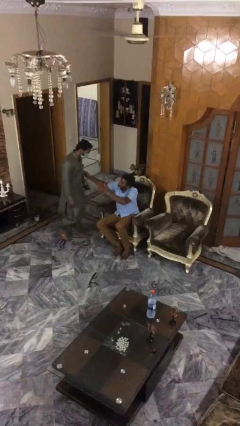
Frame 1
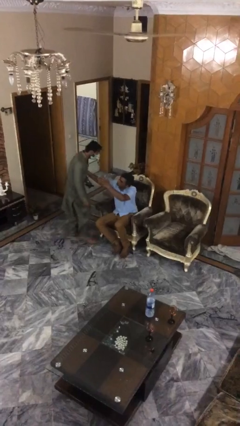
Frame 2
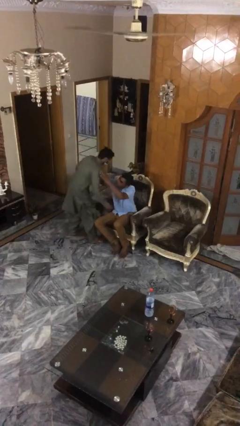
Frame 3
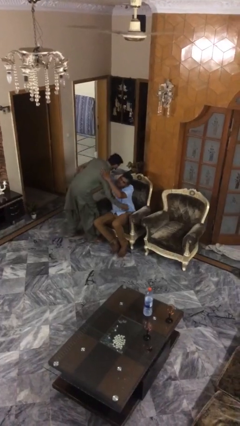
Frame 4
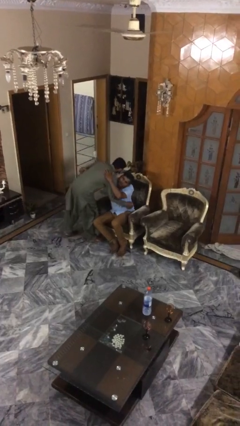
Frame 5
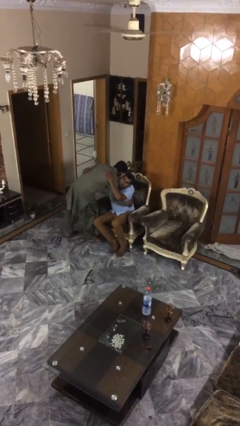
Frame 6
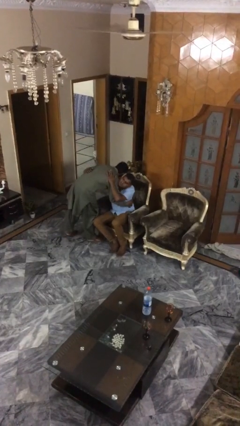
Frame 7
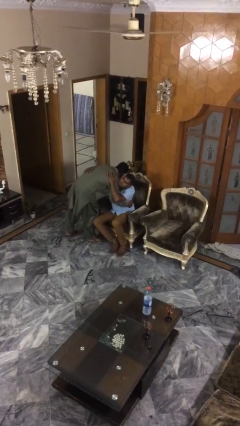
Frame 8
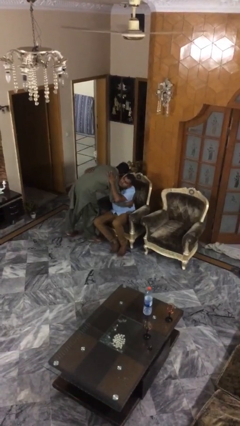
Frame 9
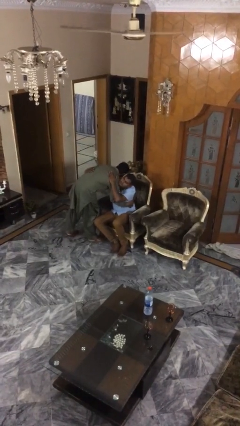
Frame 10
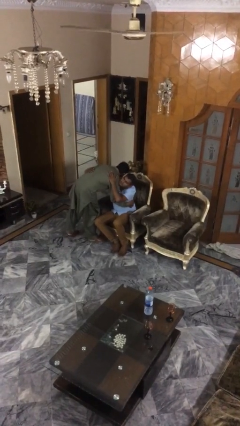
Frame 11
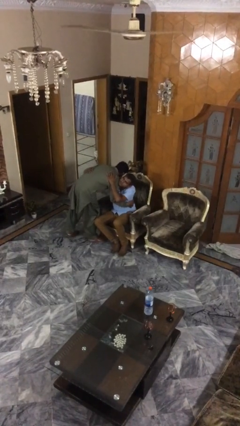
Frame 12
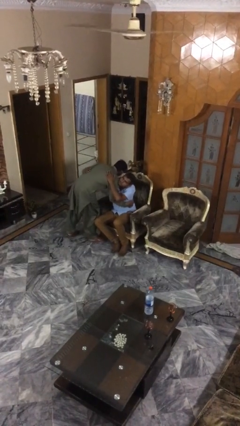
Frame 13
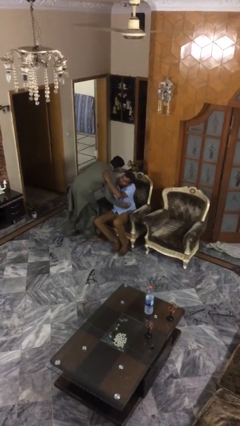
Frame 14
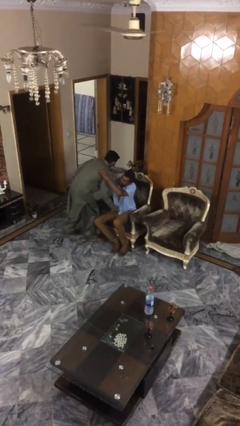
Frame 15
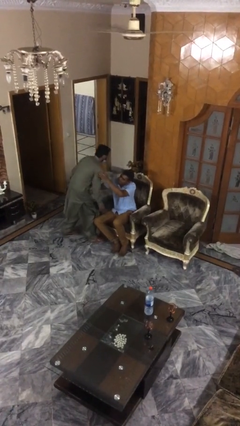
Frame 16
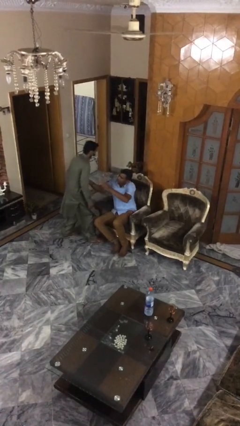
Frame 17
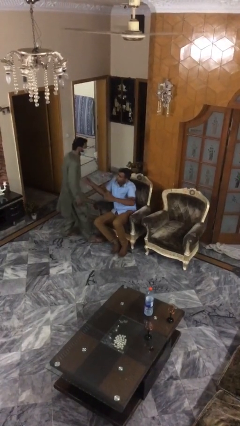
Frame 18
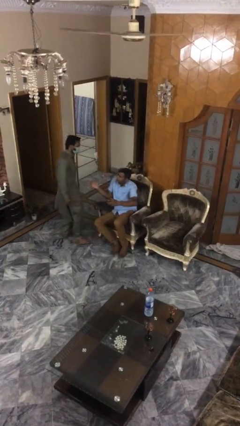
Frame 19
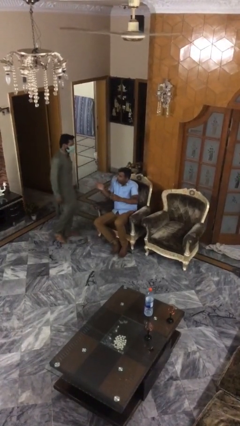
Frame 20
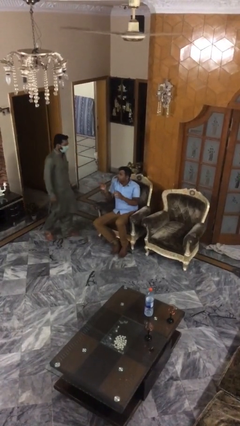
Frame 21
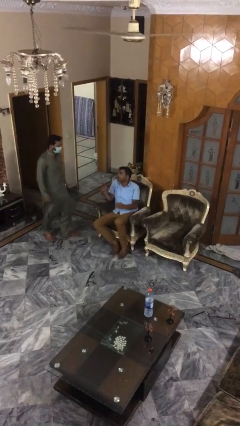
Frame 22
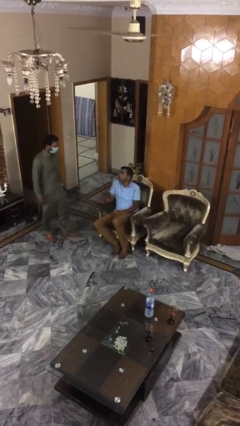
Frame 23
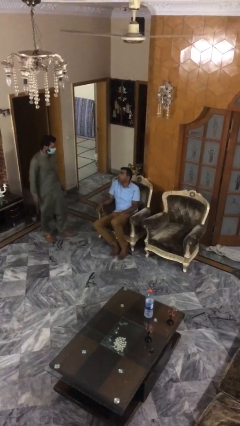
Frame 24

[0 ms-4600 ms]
person embraces person

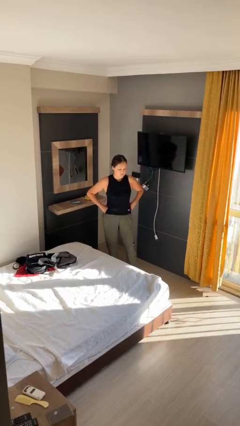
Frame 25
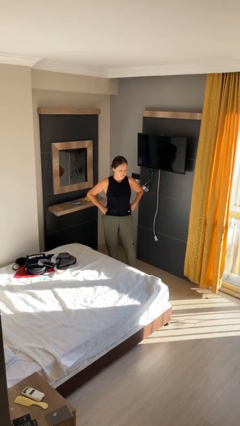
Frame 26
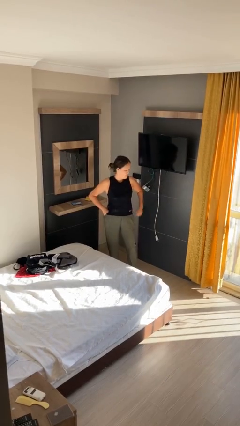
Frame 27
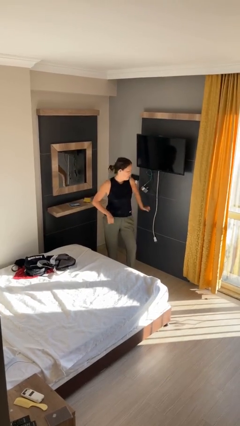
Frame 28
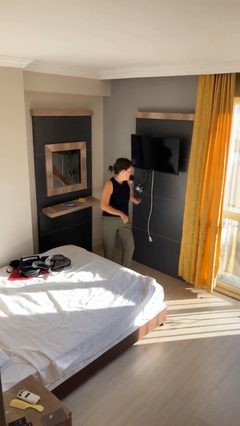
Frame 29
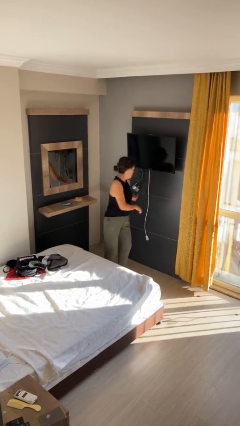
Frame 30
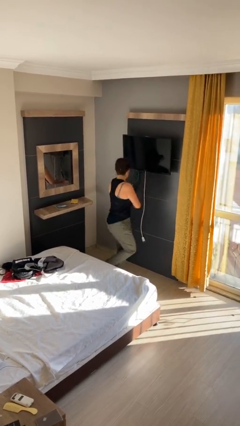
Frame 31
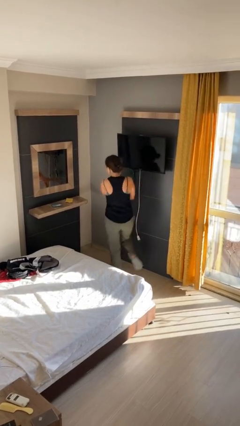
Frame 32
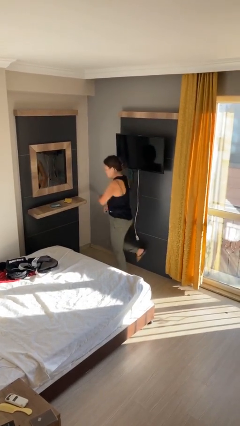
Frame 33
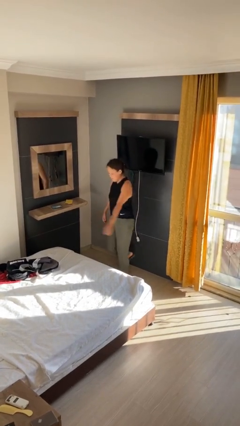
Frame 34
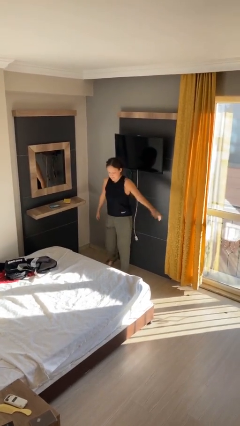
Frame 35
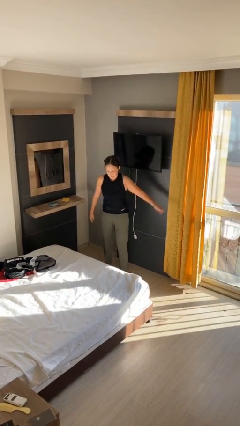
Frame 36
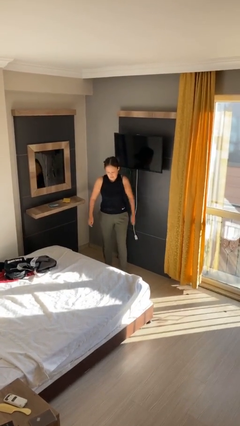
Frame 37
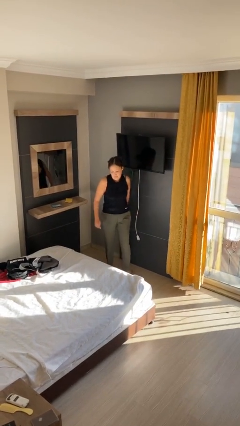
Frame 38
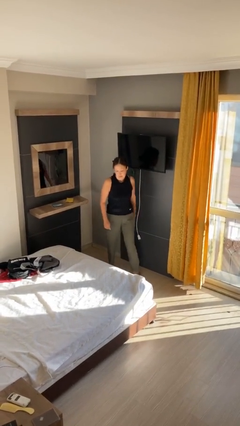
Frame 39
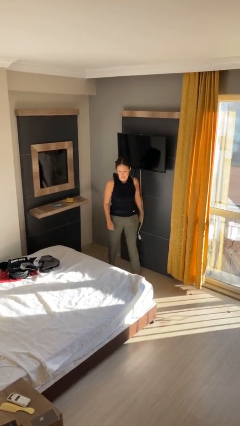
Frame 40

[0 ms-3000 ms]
person twirls

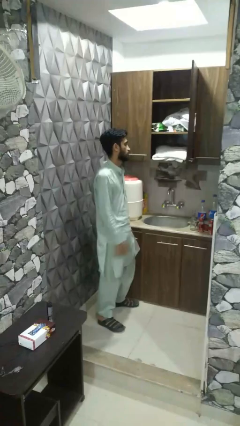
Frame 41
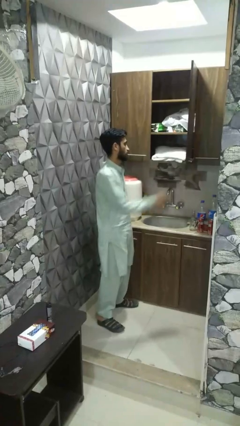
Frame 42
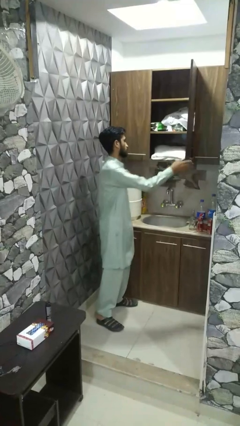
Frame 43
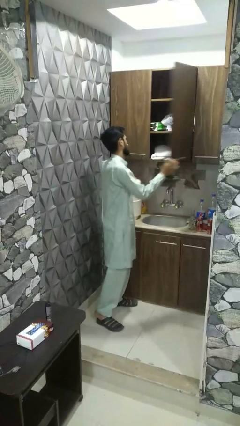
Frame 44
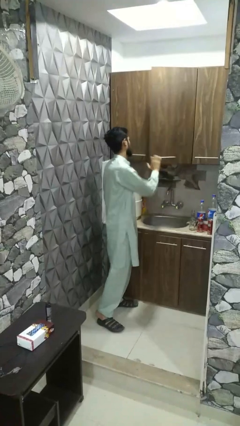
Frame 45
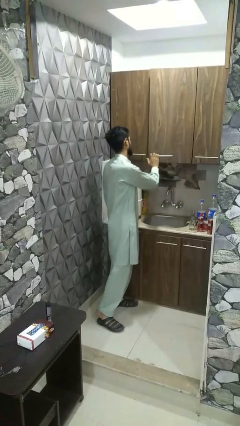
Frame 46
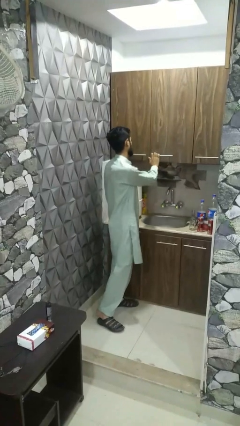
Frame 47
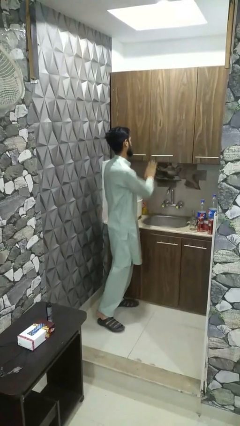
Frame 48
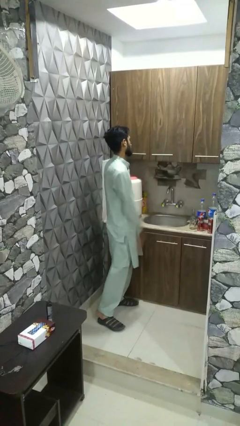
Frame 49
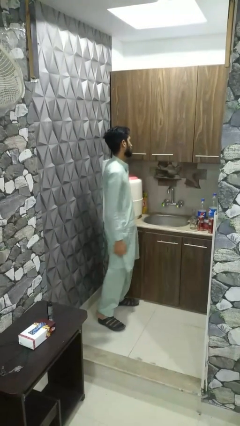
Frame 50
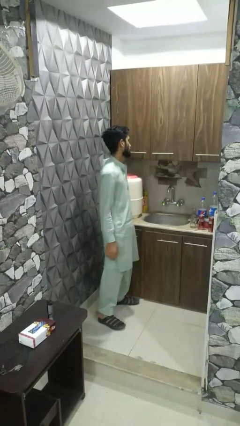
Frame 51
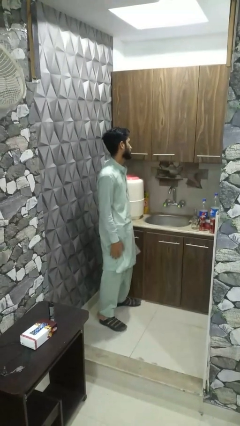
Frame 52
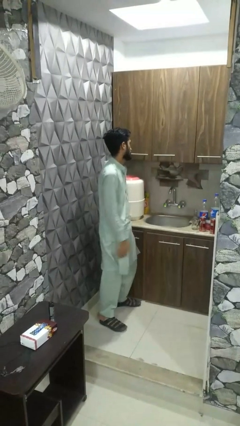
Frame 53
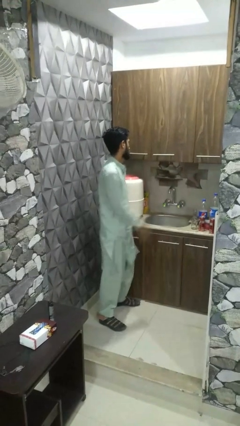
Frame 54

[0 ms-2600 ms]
person closes dresser drawer

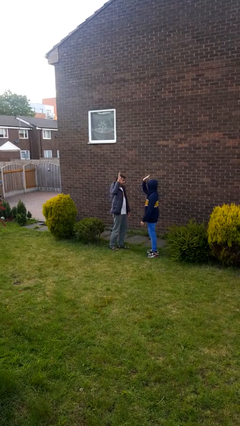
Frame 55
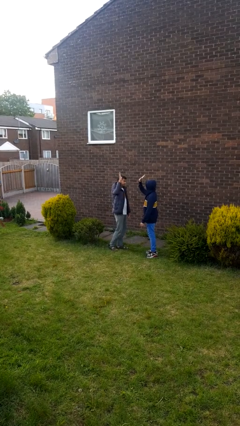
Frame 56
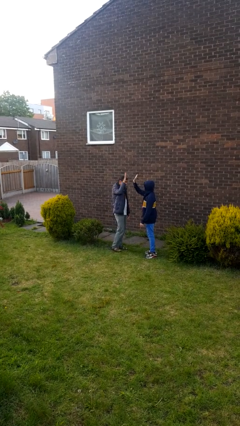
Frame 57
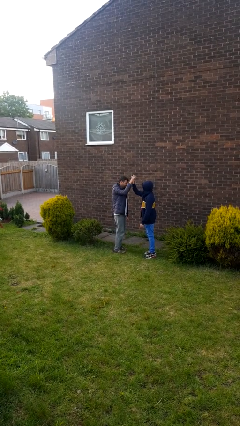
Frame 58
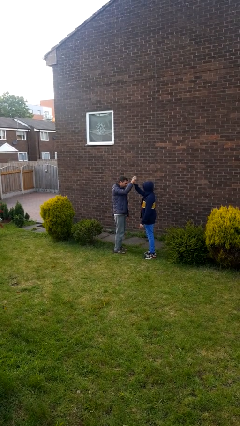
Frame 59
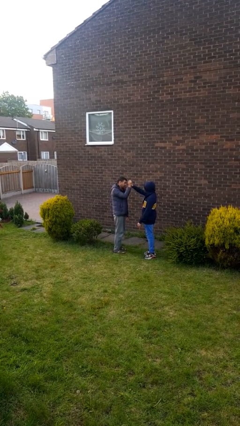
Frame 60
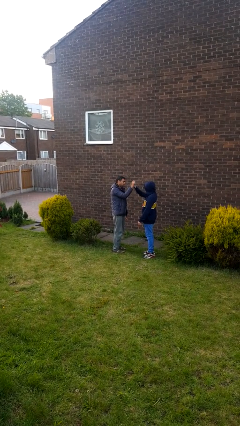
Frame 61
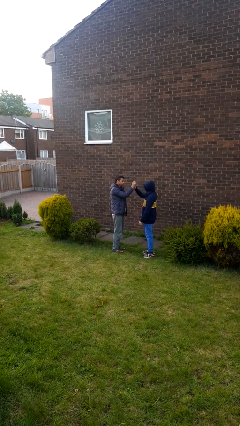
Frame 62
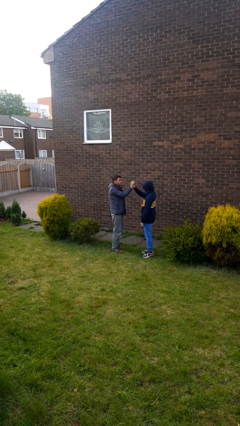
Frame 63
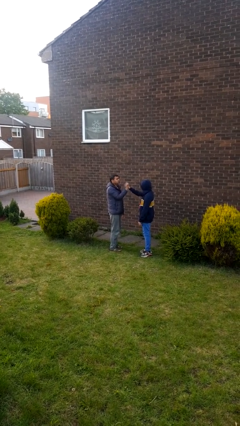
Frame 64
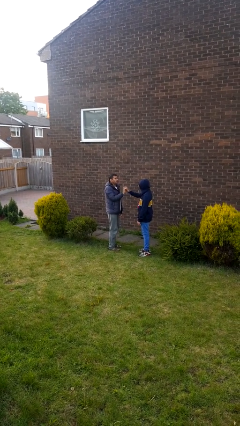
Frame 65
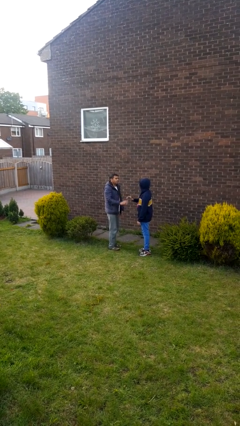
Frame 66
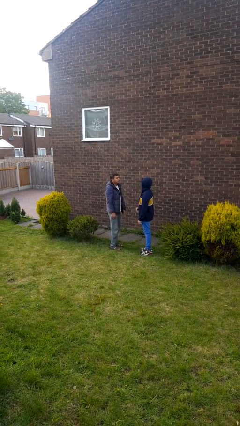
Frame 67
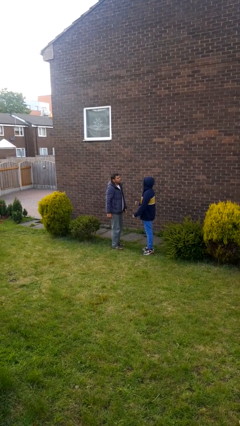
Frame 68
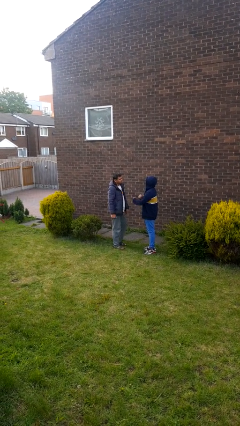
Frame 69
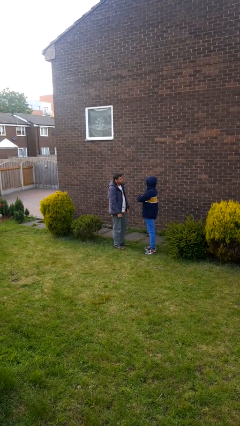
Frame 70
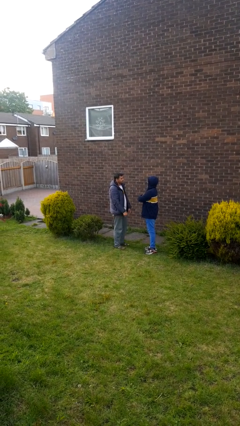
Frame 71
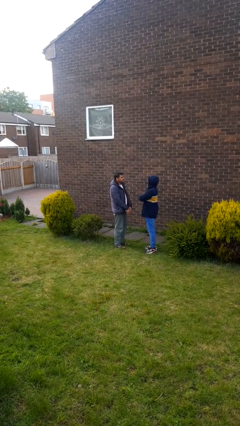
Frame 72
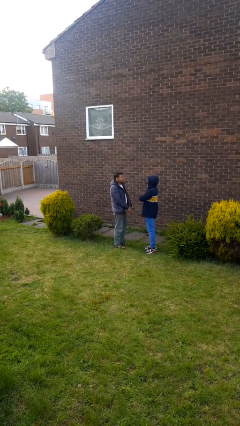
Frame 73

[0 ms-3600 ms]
person highfives hand

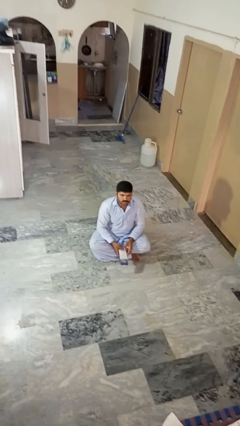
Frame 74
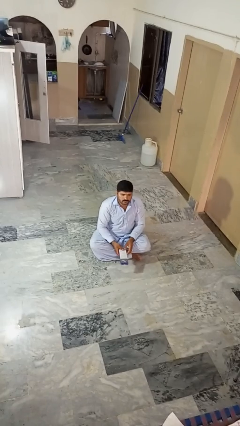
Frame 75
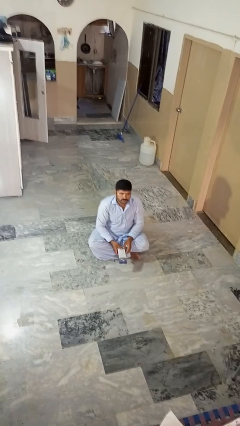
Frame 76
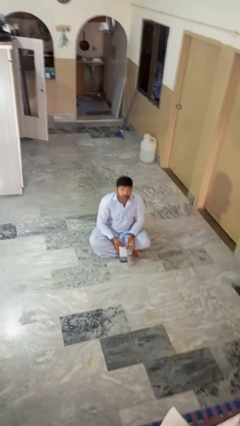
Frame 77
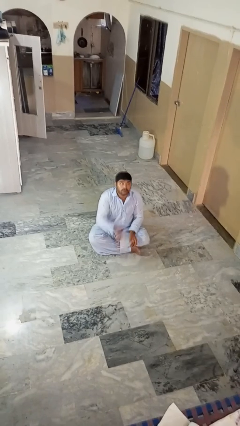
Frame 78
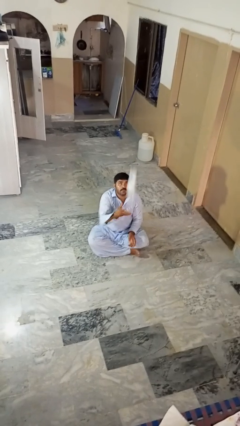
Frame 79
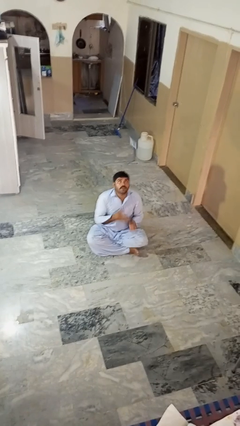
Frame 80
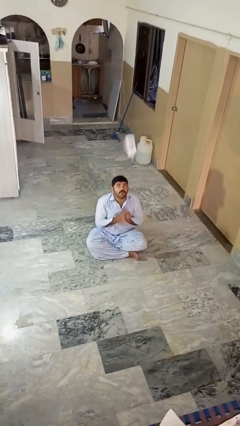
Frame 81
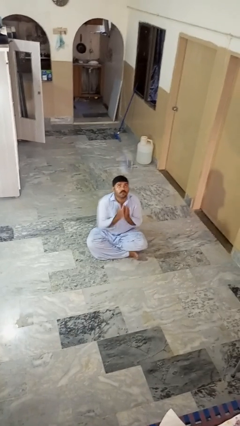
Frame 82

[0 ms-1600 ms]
person drops object

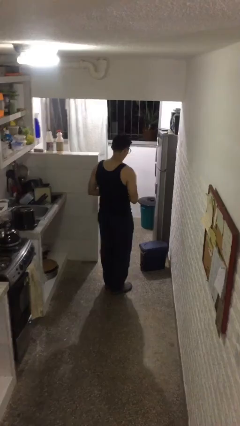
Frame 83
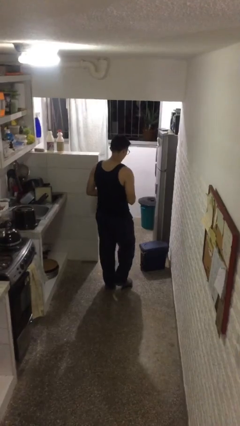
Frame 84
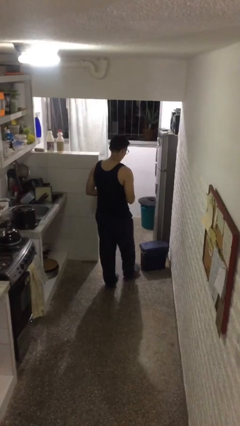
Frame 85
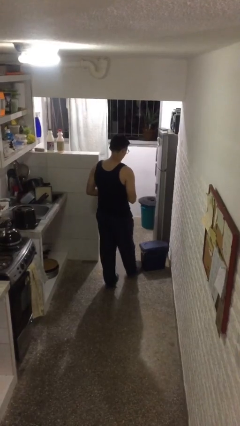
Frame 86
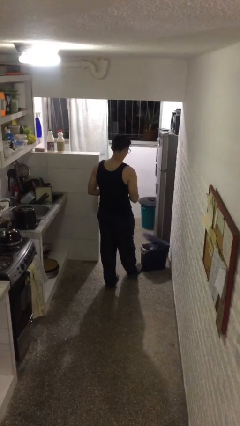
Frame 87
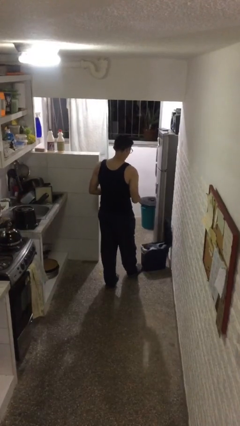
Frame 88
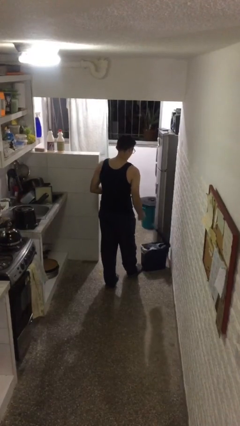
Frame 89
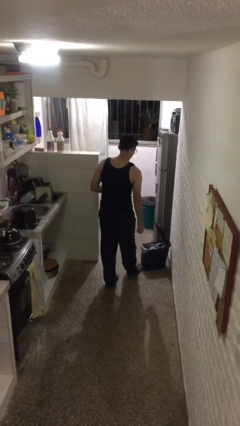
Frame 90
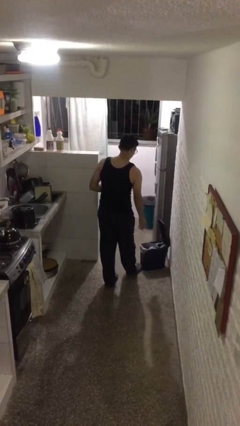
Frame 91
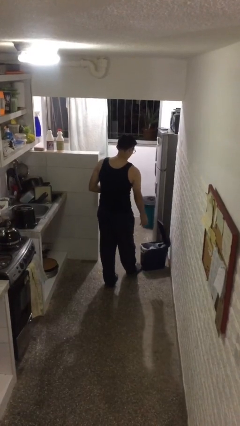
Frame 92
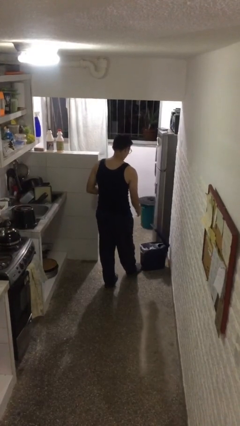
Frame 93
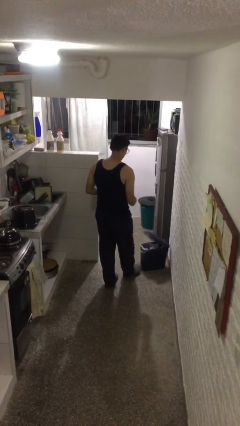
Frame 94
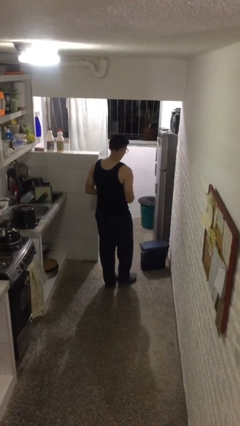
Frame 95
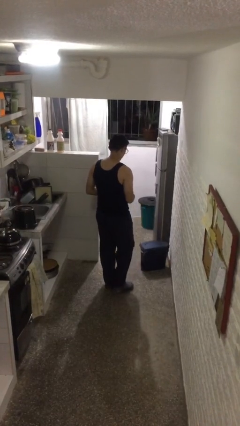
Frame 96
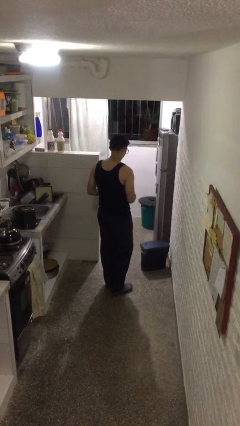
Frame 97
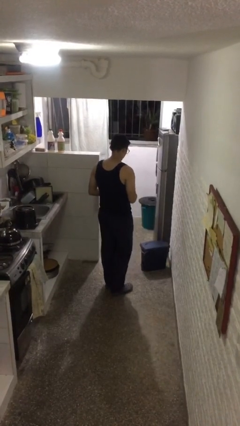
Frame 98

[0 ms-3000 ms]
person discards trash
